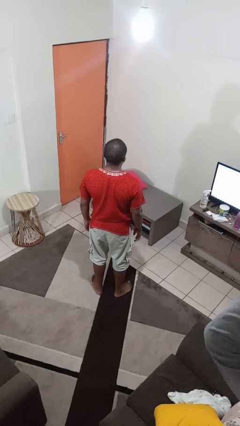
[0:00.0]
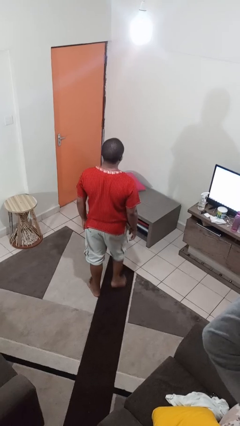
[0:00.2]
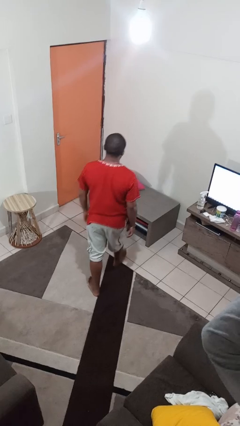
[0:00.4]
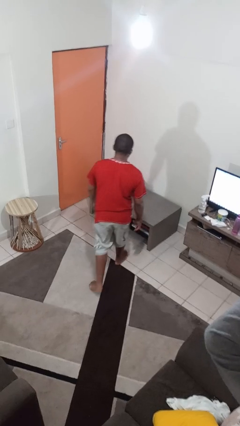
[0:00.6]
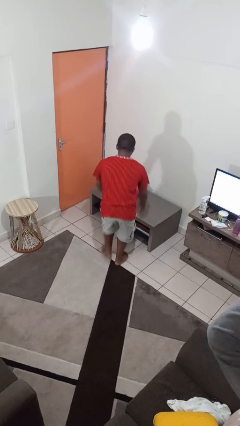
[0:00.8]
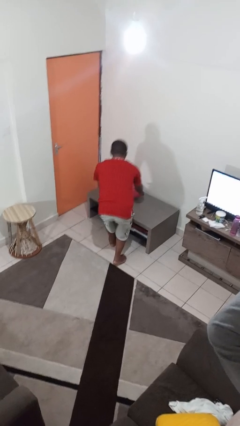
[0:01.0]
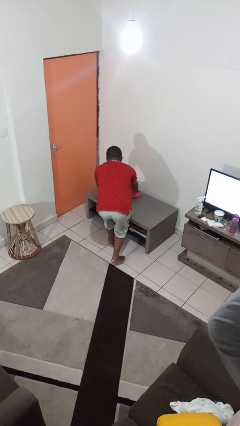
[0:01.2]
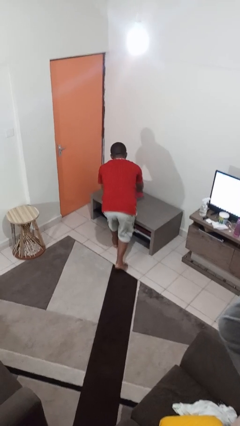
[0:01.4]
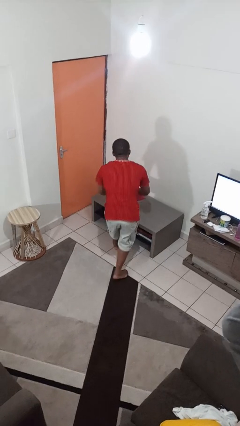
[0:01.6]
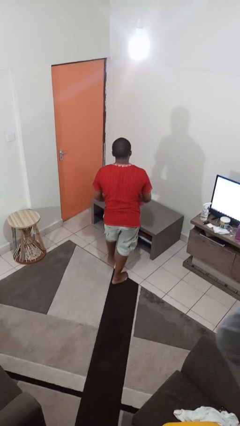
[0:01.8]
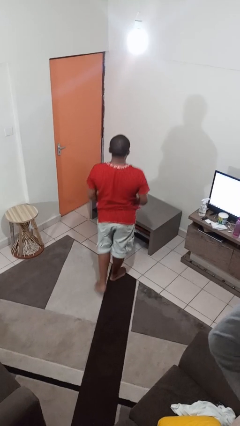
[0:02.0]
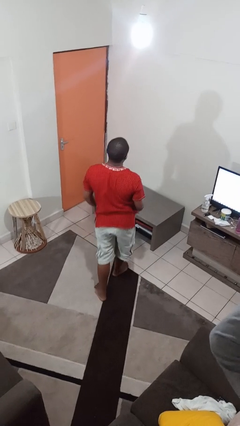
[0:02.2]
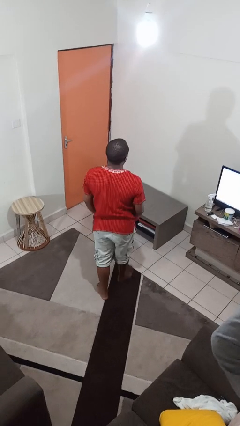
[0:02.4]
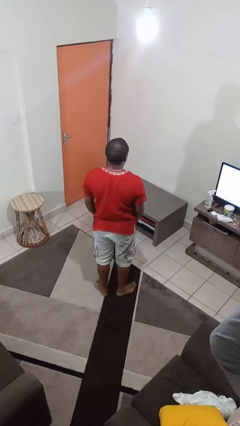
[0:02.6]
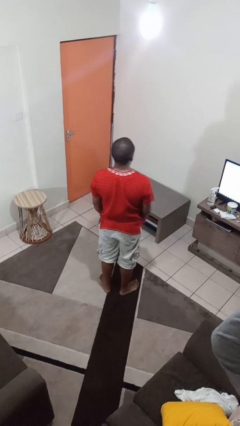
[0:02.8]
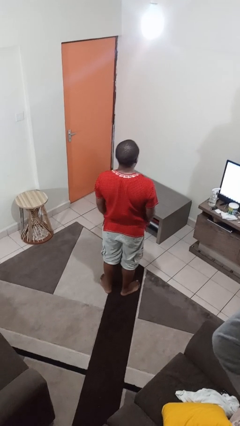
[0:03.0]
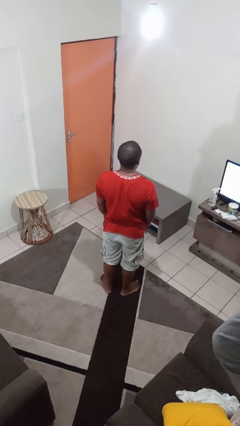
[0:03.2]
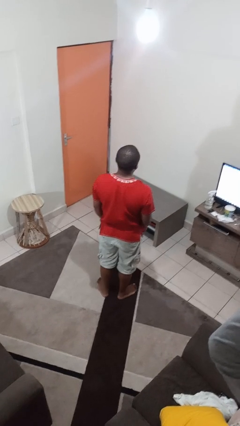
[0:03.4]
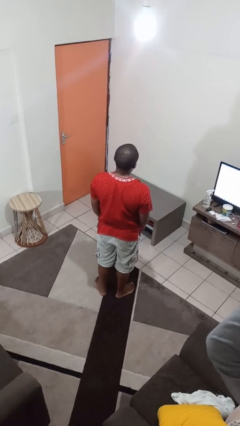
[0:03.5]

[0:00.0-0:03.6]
person picks up object from table

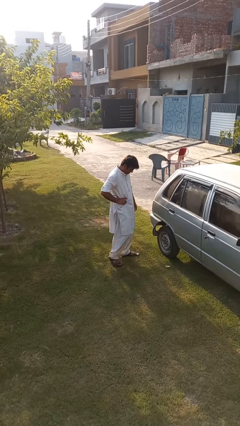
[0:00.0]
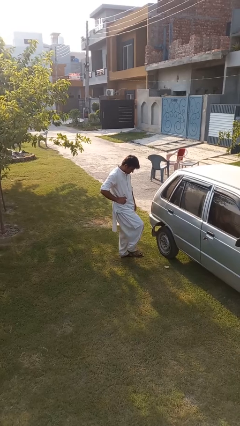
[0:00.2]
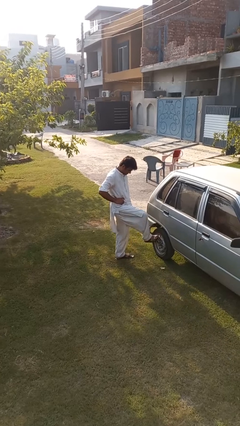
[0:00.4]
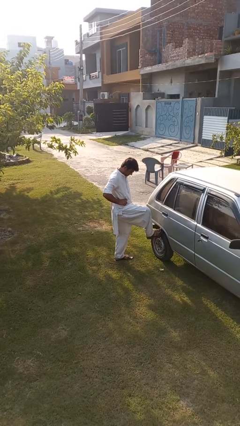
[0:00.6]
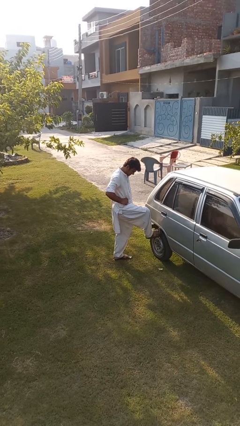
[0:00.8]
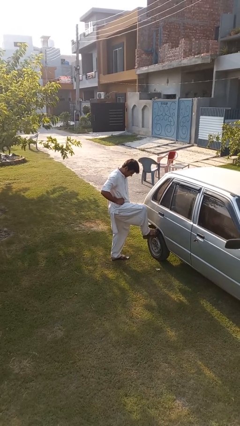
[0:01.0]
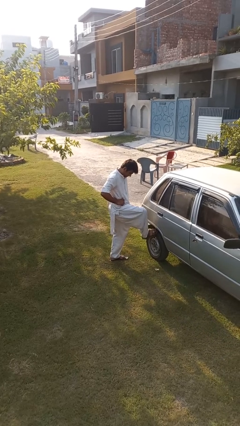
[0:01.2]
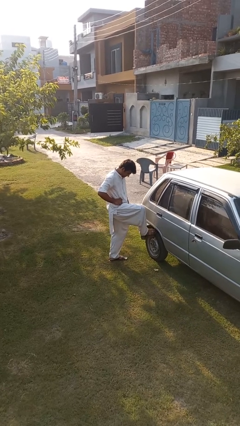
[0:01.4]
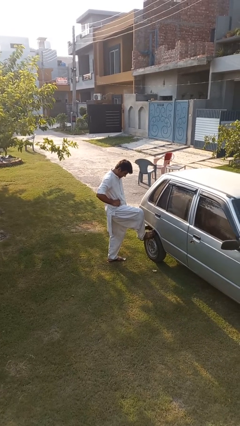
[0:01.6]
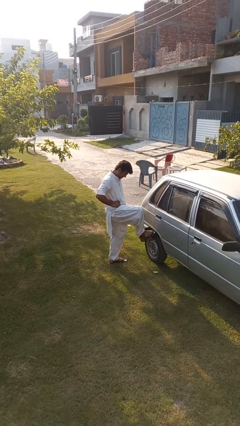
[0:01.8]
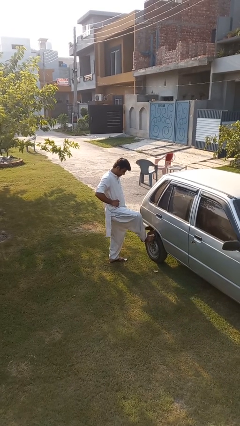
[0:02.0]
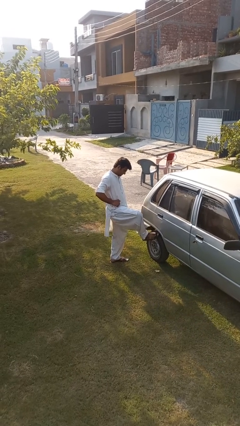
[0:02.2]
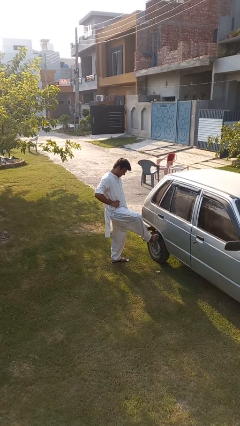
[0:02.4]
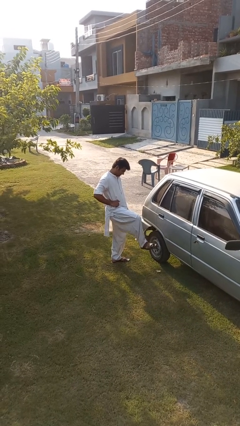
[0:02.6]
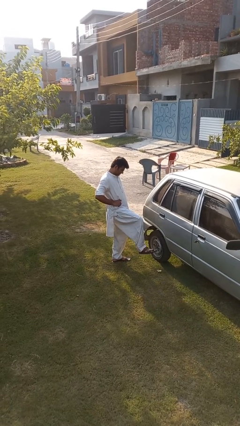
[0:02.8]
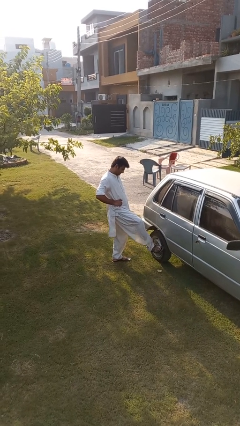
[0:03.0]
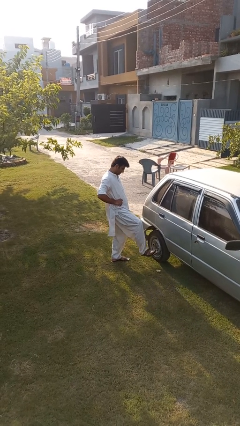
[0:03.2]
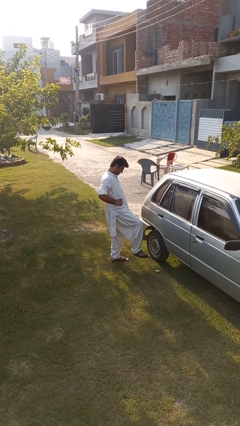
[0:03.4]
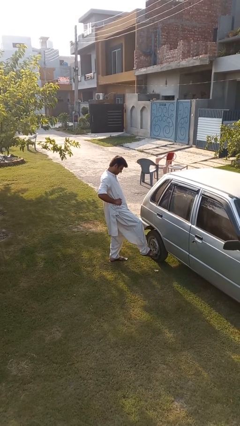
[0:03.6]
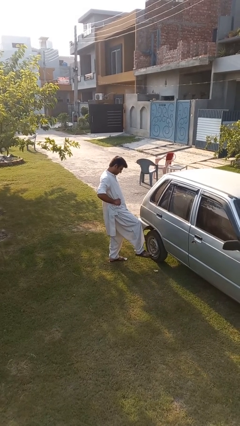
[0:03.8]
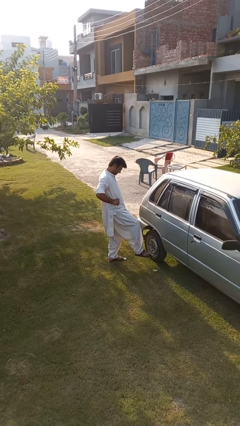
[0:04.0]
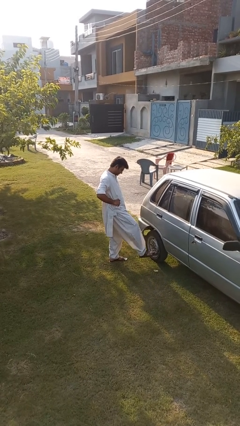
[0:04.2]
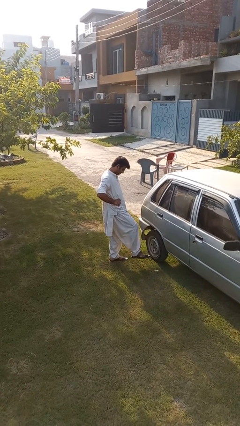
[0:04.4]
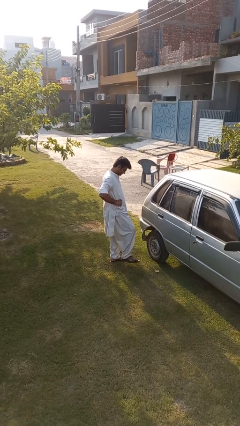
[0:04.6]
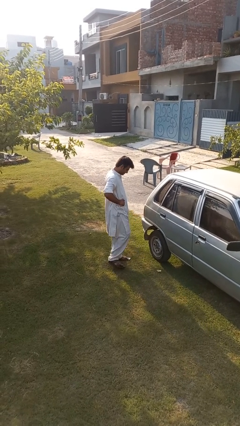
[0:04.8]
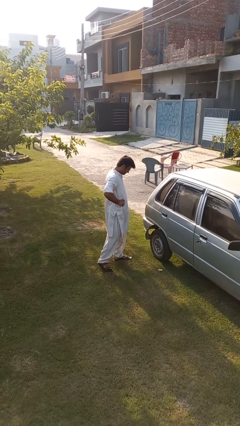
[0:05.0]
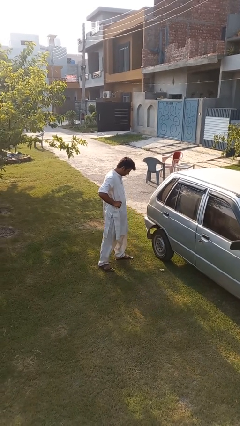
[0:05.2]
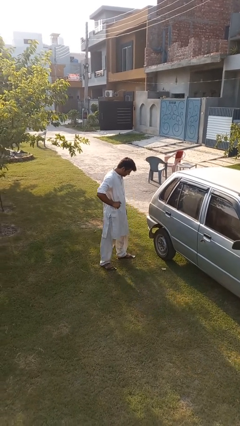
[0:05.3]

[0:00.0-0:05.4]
person kicks car tires

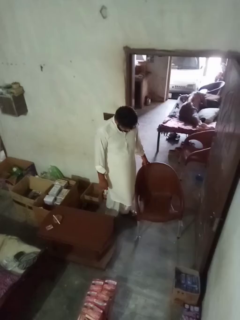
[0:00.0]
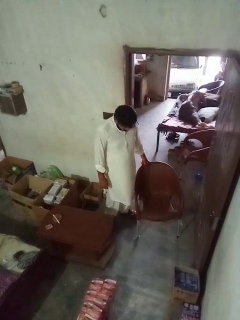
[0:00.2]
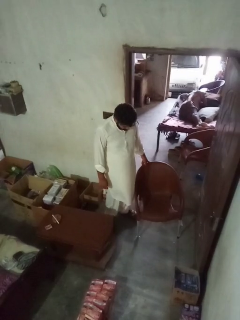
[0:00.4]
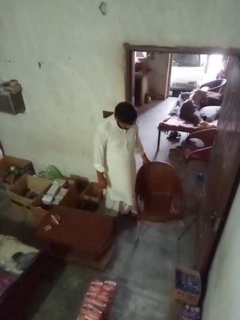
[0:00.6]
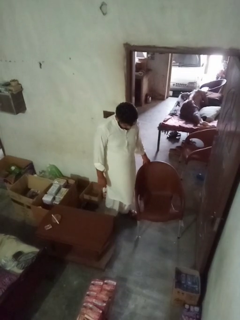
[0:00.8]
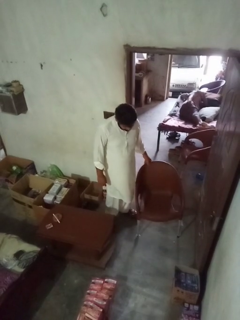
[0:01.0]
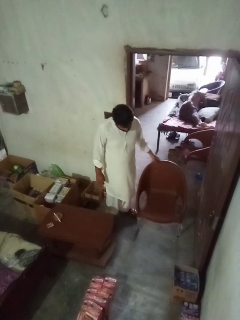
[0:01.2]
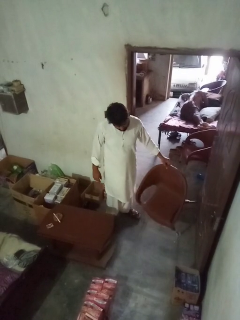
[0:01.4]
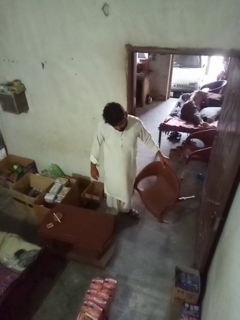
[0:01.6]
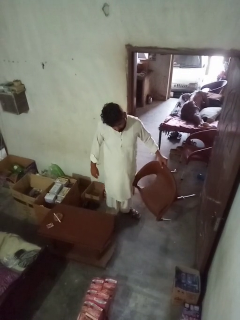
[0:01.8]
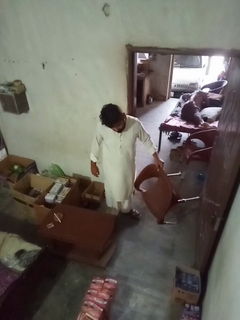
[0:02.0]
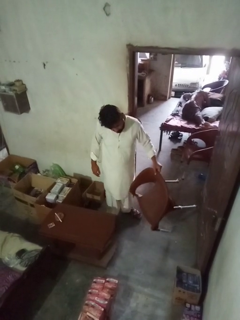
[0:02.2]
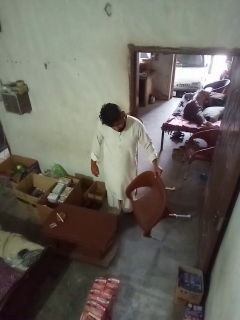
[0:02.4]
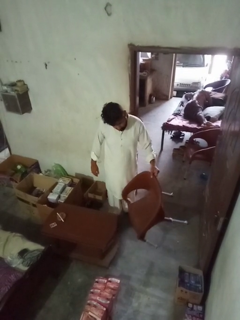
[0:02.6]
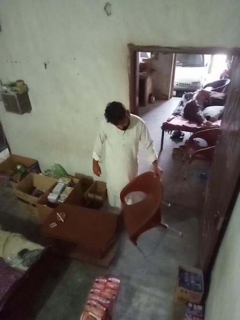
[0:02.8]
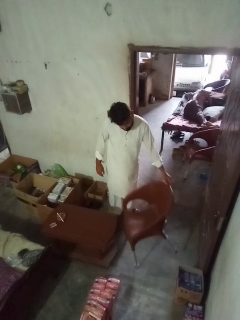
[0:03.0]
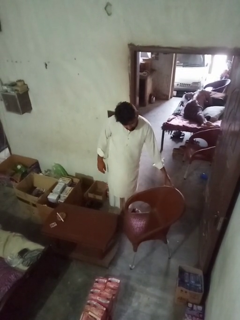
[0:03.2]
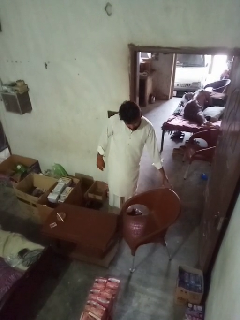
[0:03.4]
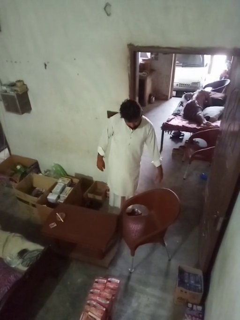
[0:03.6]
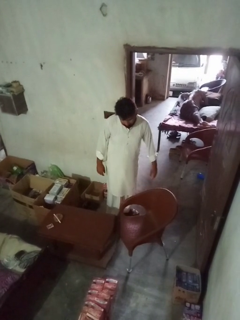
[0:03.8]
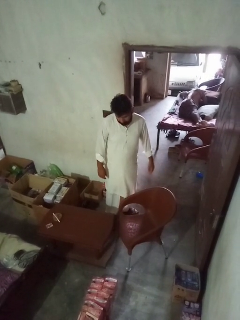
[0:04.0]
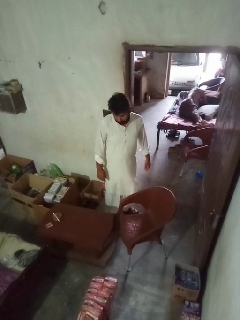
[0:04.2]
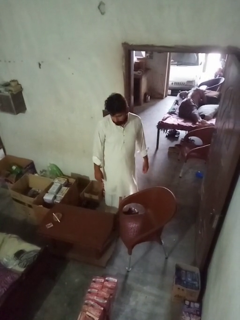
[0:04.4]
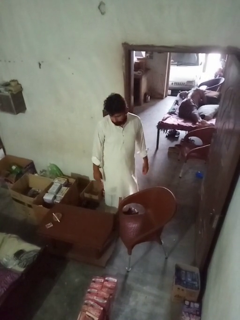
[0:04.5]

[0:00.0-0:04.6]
person pulls out chair

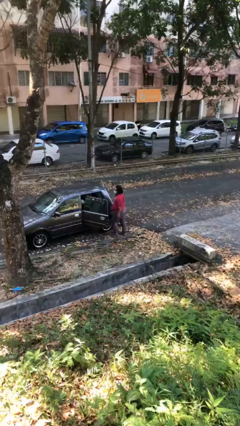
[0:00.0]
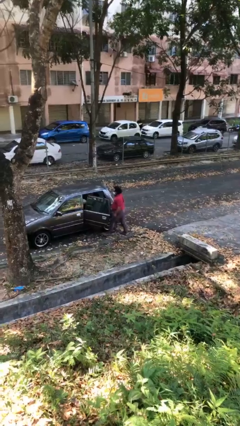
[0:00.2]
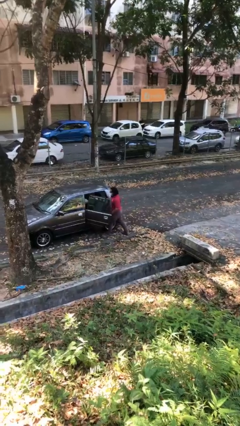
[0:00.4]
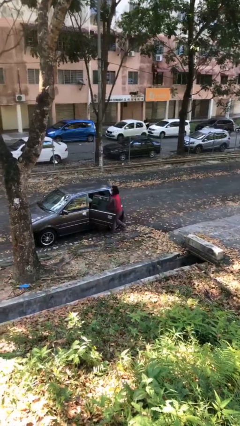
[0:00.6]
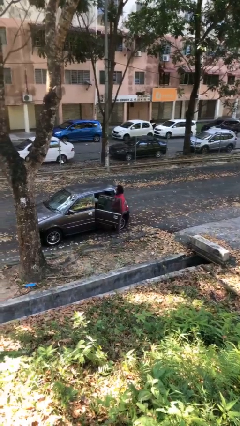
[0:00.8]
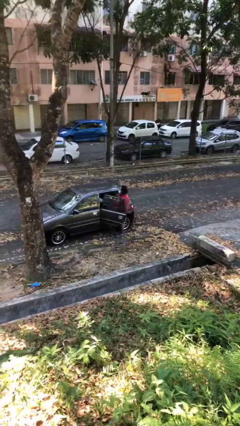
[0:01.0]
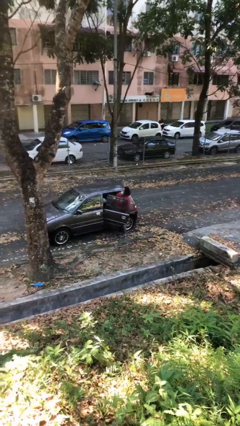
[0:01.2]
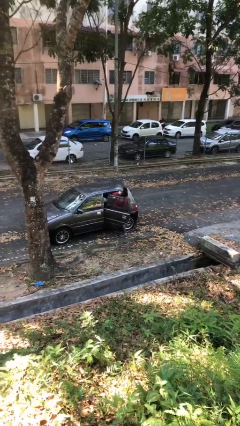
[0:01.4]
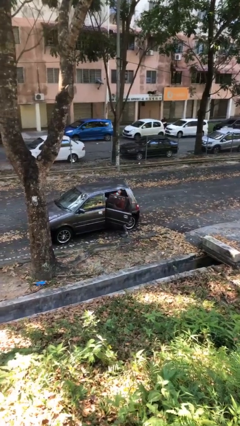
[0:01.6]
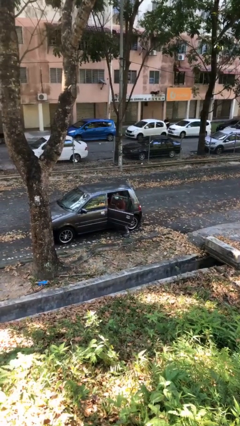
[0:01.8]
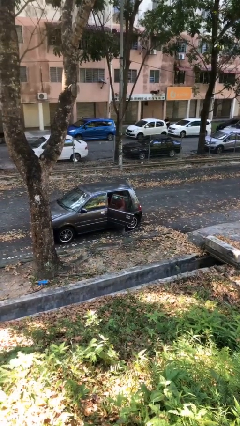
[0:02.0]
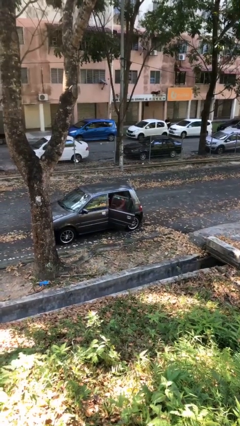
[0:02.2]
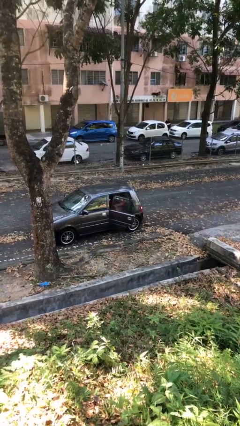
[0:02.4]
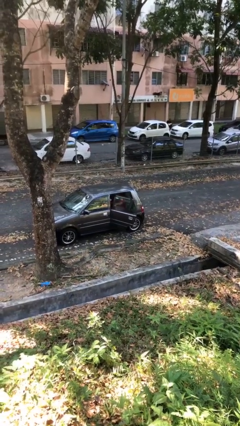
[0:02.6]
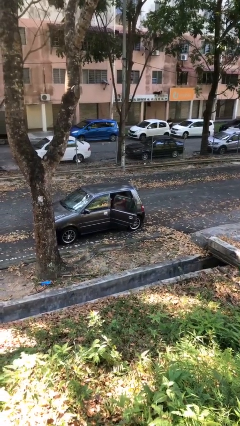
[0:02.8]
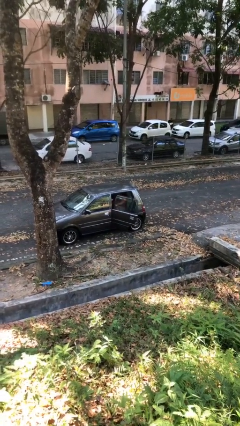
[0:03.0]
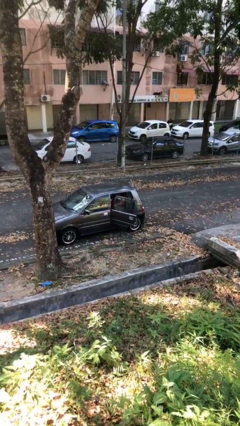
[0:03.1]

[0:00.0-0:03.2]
person enters car

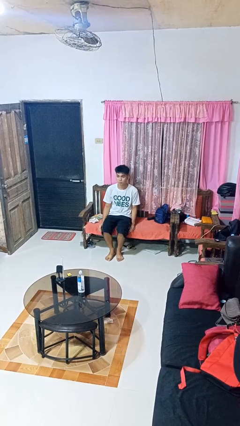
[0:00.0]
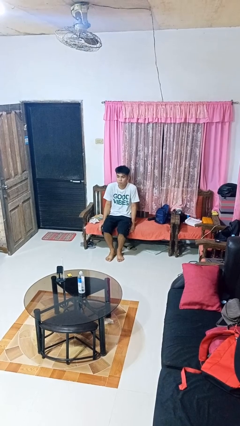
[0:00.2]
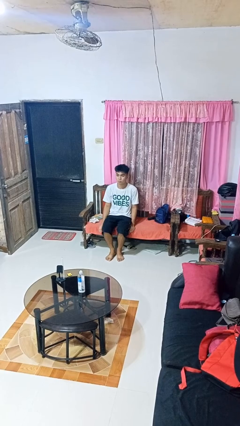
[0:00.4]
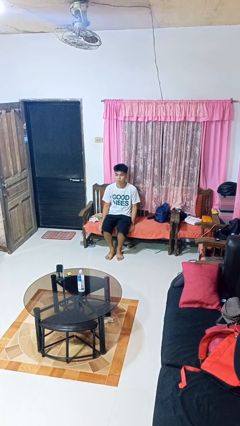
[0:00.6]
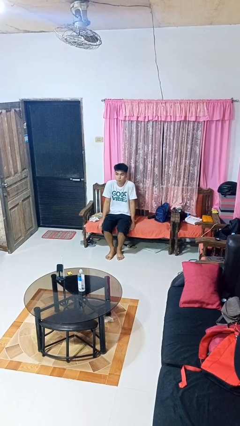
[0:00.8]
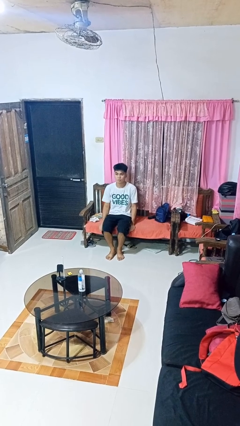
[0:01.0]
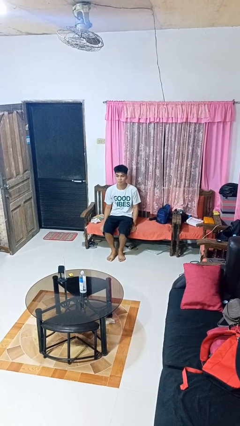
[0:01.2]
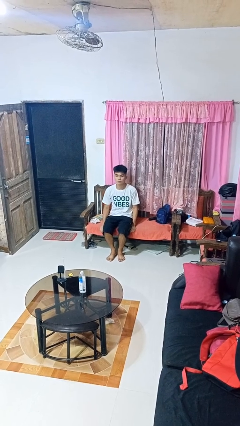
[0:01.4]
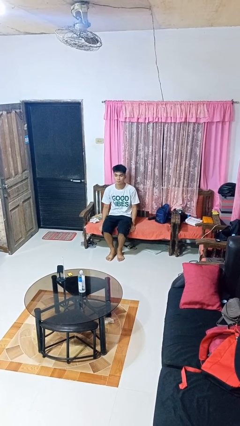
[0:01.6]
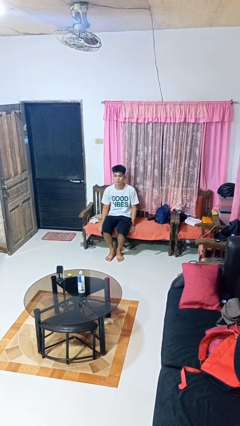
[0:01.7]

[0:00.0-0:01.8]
person shrugs

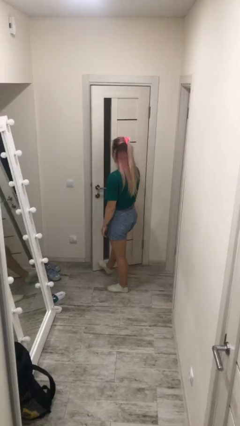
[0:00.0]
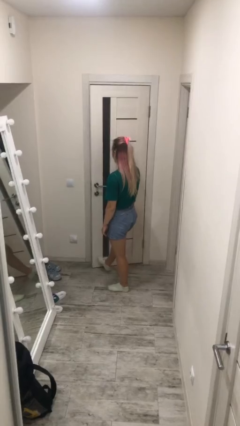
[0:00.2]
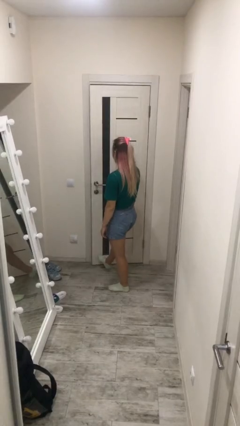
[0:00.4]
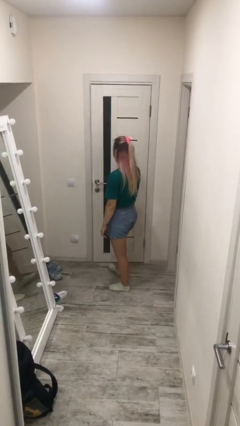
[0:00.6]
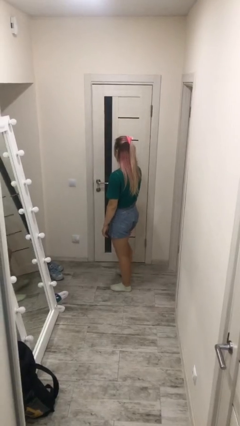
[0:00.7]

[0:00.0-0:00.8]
person closes door with foot
